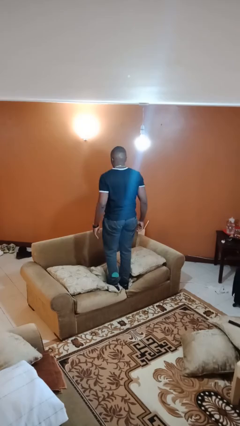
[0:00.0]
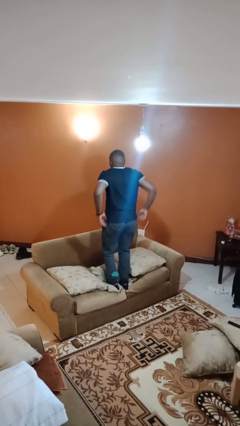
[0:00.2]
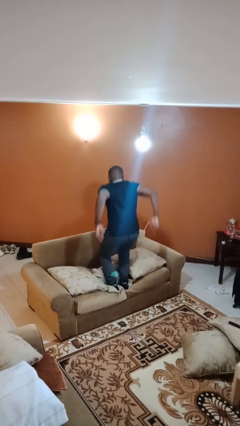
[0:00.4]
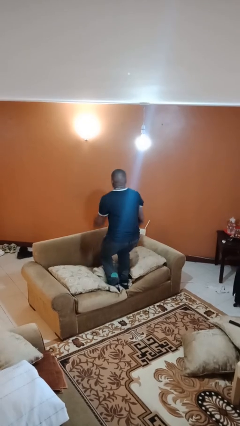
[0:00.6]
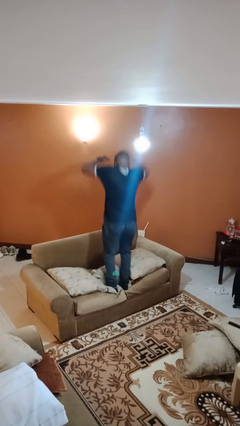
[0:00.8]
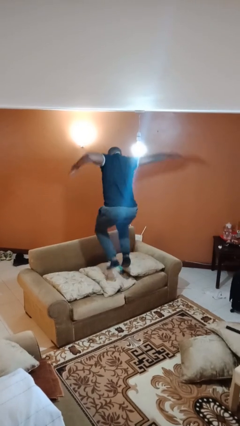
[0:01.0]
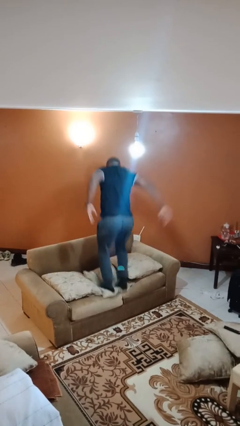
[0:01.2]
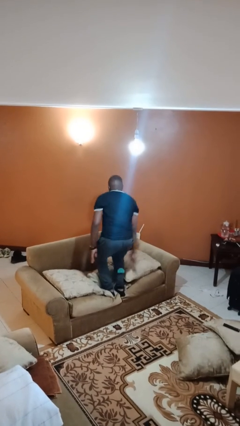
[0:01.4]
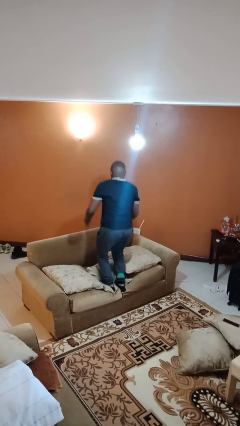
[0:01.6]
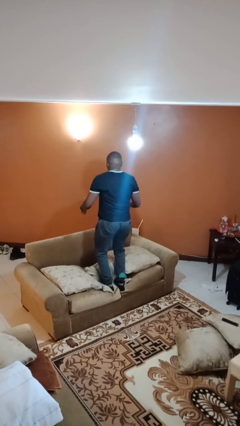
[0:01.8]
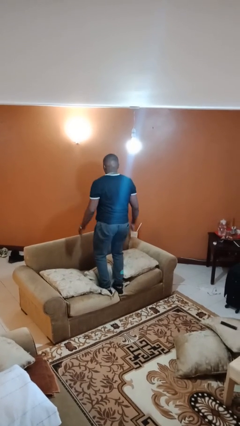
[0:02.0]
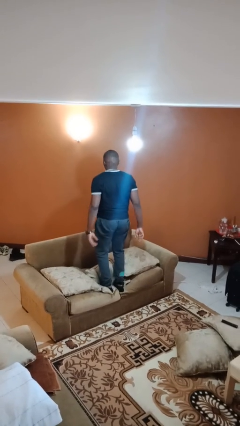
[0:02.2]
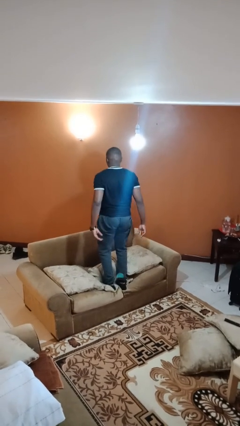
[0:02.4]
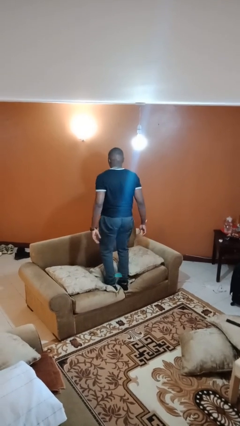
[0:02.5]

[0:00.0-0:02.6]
person jumps on couch

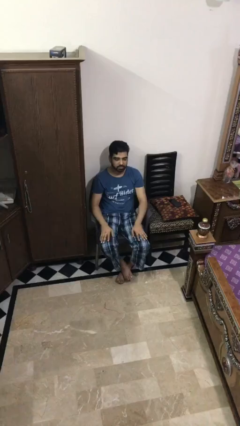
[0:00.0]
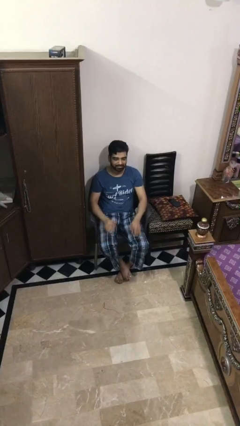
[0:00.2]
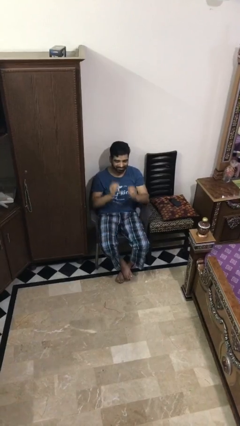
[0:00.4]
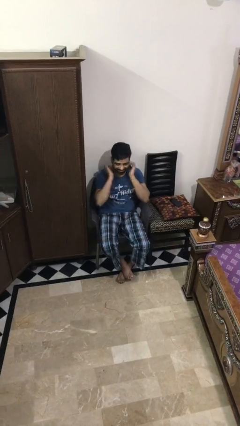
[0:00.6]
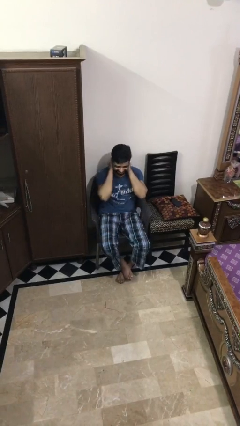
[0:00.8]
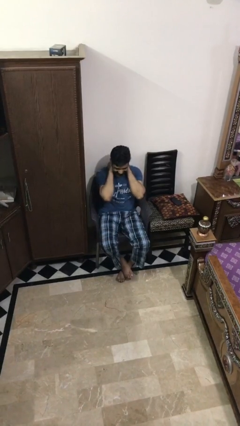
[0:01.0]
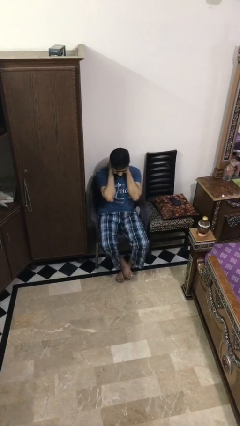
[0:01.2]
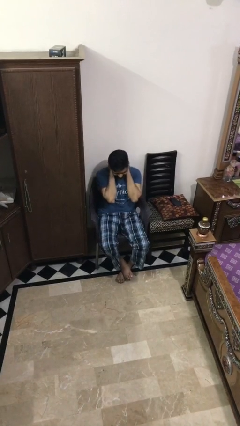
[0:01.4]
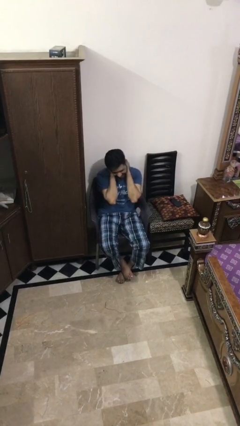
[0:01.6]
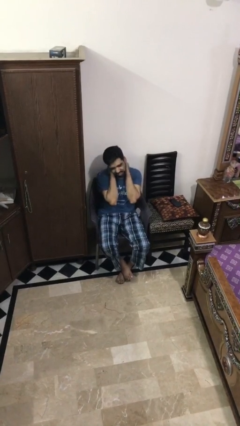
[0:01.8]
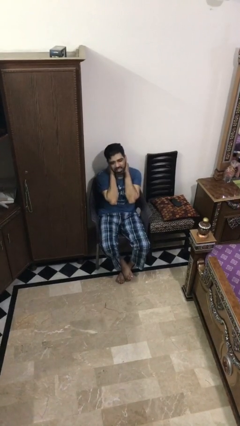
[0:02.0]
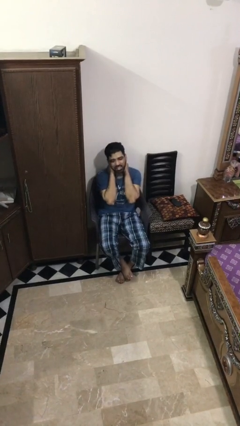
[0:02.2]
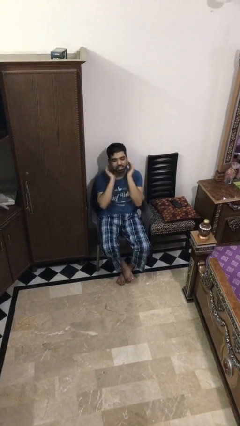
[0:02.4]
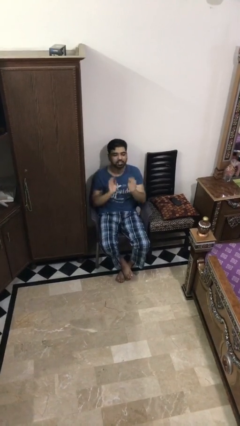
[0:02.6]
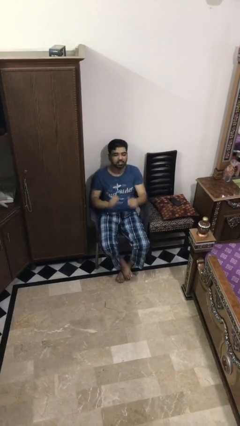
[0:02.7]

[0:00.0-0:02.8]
person rubs neck

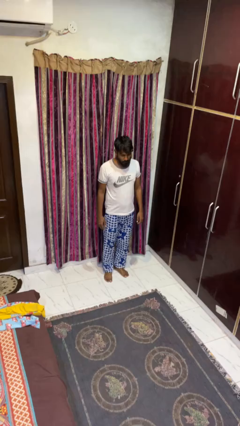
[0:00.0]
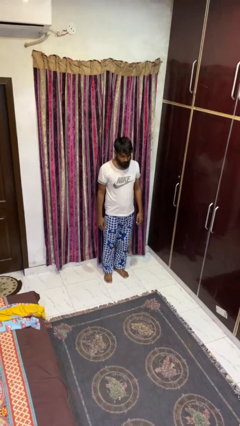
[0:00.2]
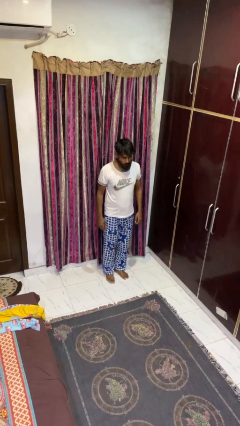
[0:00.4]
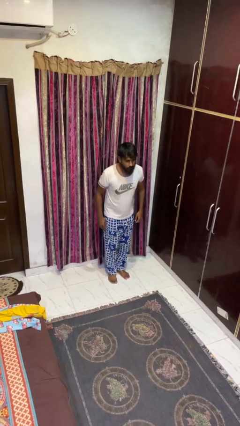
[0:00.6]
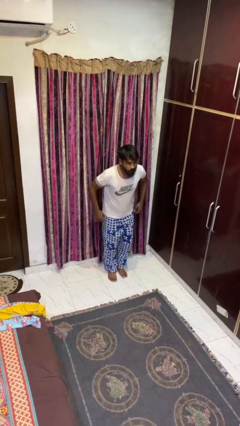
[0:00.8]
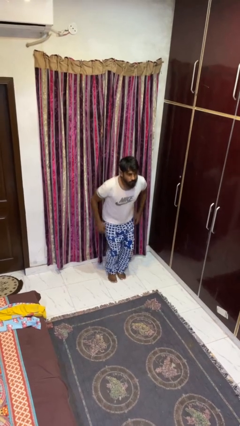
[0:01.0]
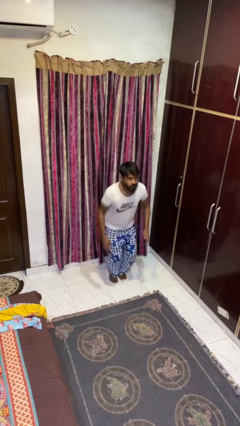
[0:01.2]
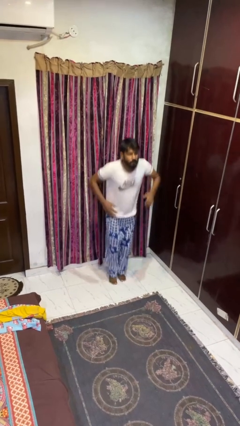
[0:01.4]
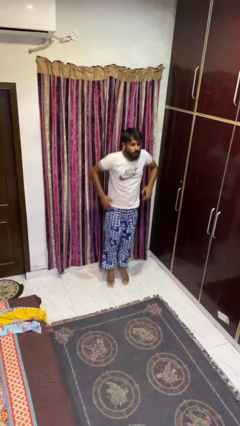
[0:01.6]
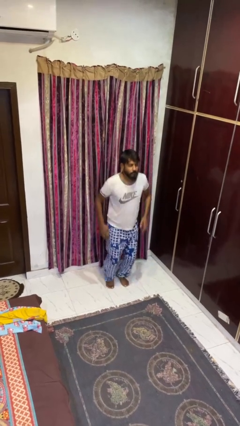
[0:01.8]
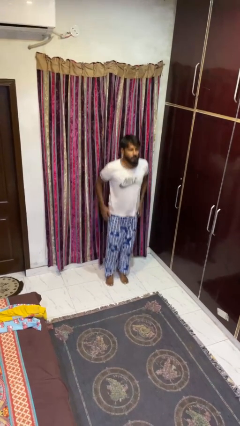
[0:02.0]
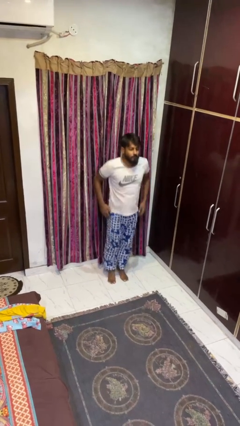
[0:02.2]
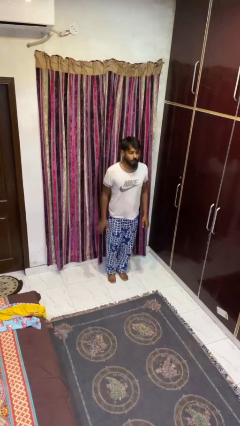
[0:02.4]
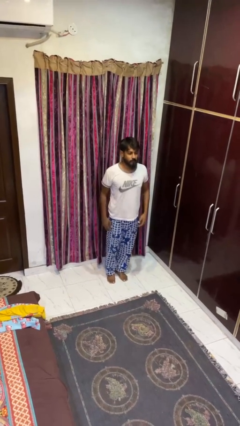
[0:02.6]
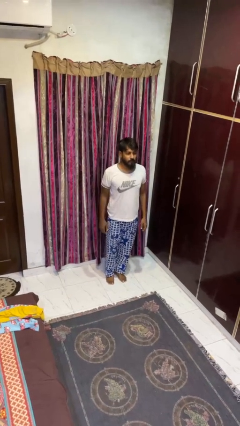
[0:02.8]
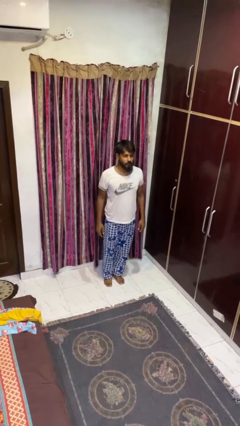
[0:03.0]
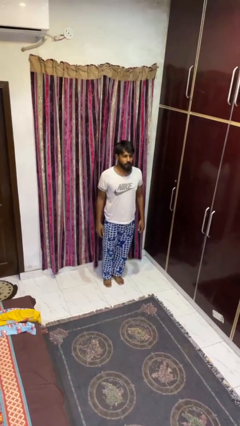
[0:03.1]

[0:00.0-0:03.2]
person jumps

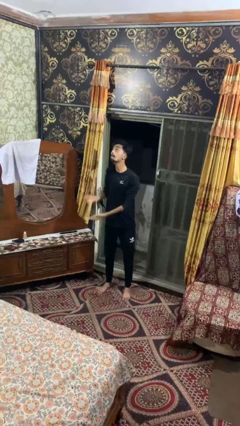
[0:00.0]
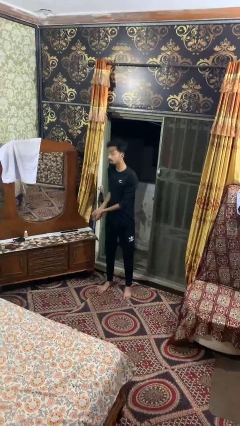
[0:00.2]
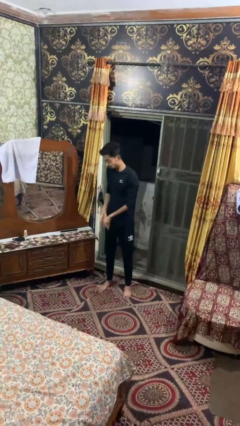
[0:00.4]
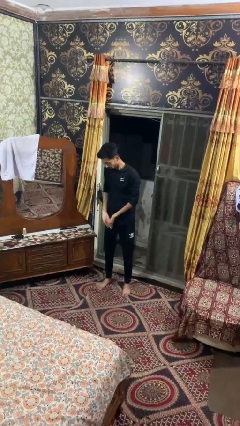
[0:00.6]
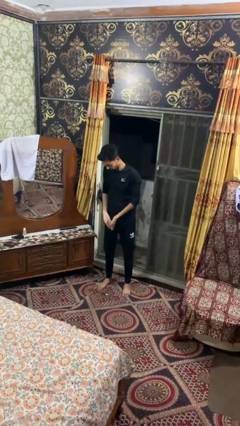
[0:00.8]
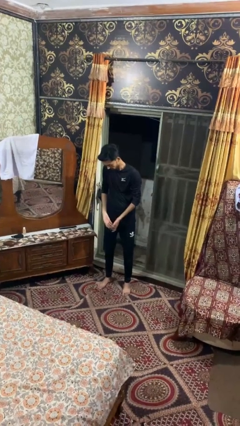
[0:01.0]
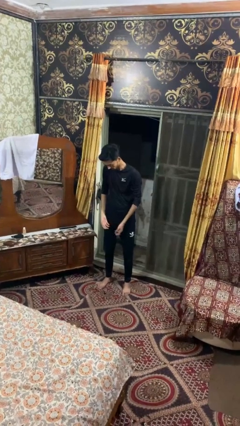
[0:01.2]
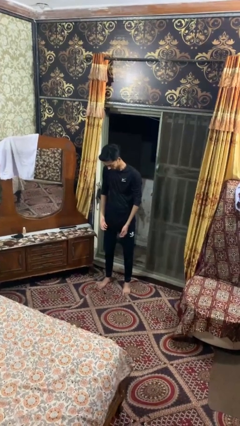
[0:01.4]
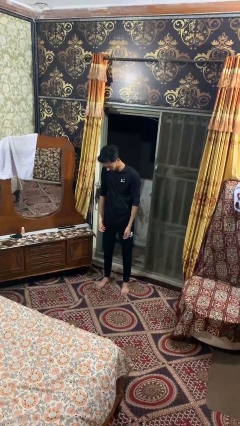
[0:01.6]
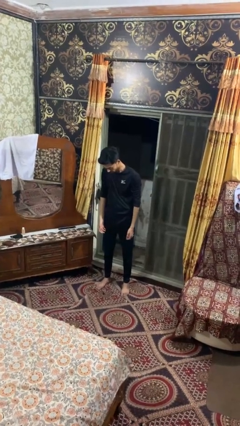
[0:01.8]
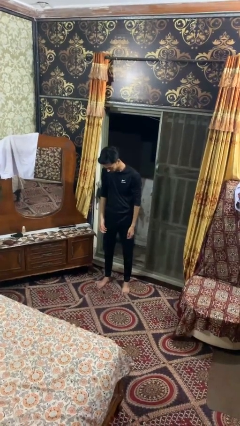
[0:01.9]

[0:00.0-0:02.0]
person catches dropped object

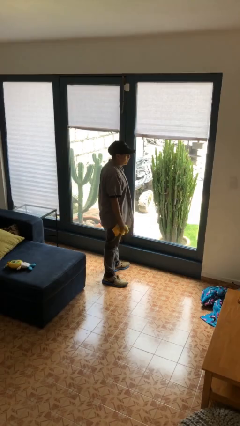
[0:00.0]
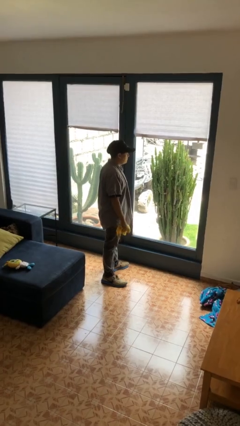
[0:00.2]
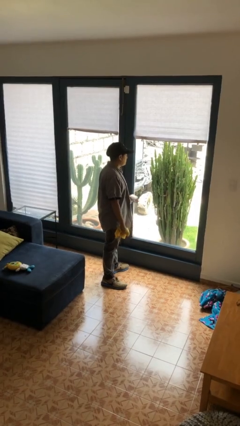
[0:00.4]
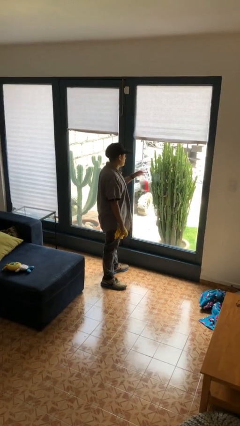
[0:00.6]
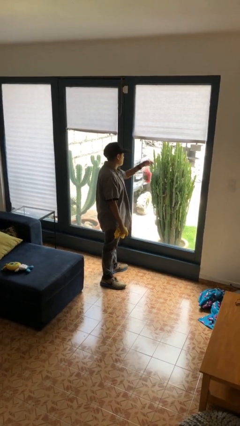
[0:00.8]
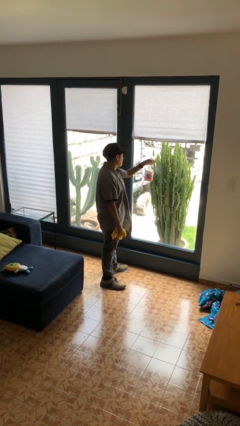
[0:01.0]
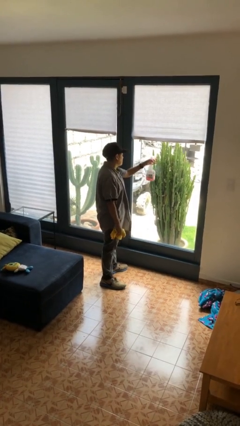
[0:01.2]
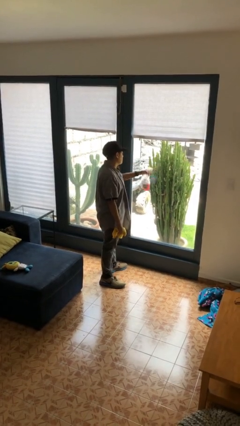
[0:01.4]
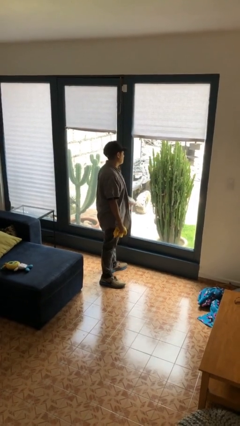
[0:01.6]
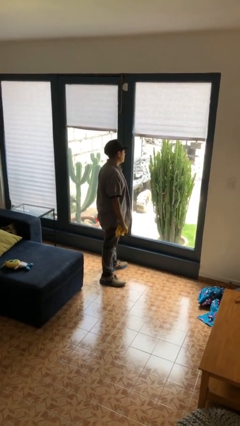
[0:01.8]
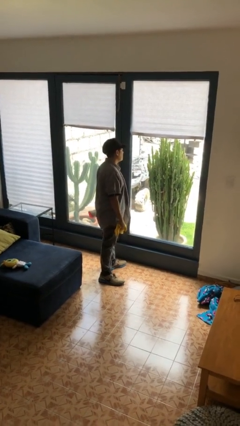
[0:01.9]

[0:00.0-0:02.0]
person sprays from bottle

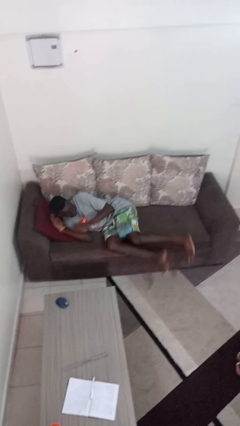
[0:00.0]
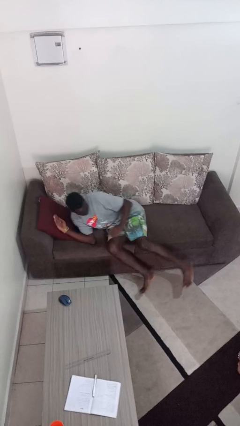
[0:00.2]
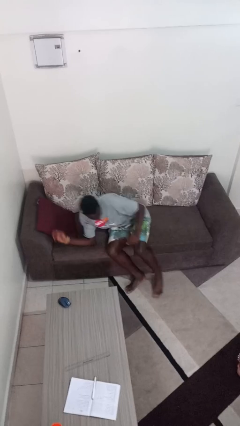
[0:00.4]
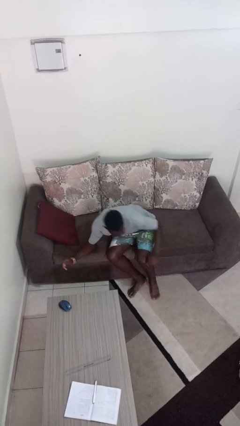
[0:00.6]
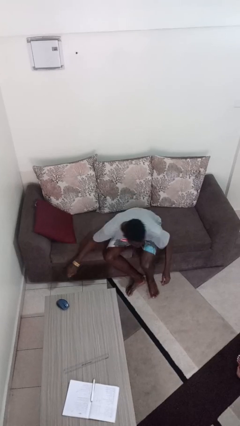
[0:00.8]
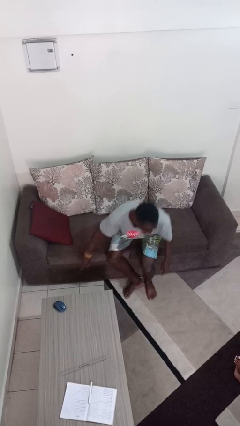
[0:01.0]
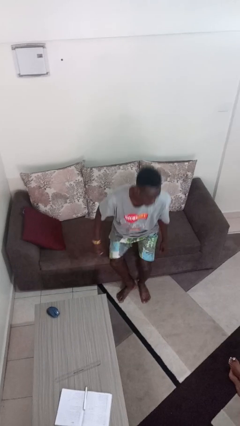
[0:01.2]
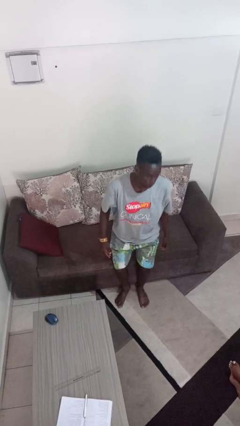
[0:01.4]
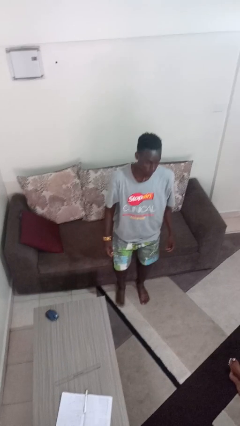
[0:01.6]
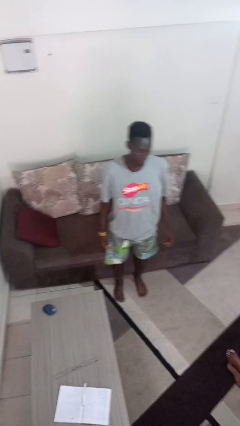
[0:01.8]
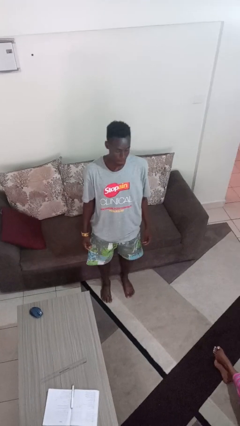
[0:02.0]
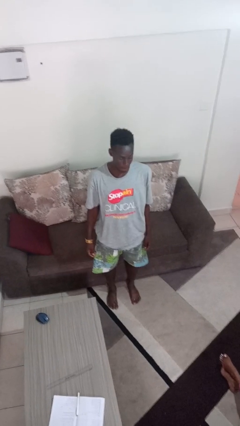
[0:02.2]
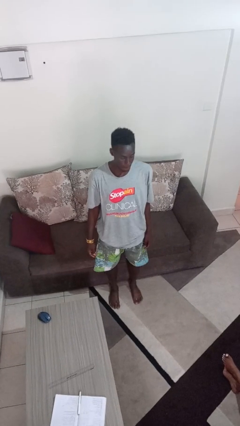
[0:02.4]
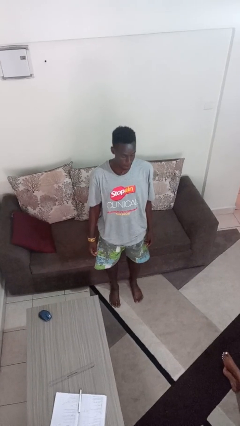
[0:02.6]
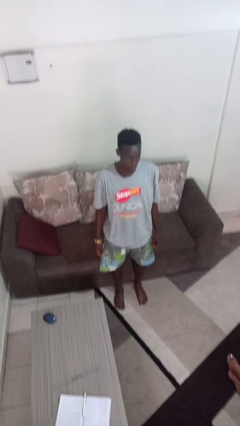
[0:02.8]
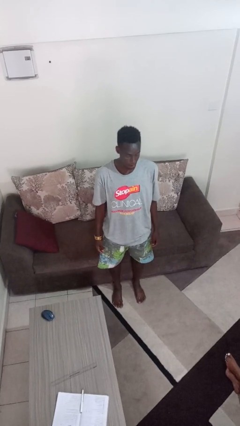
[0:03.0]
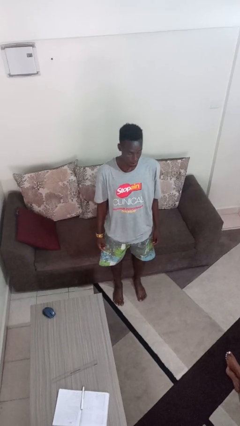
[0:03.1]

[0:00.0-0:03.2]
person stands up

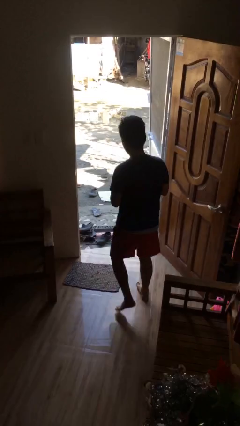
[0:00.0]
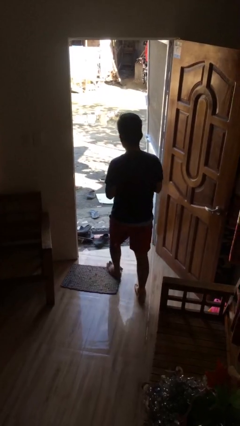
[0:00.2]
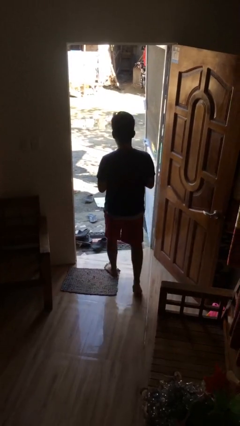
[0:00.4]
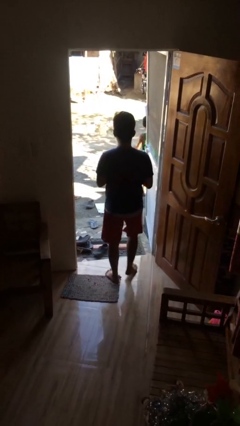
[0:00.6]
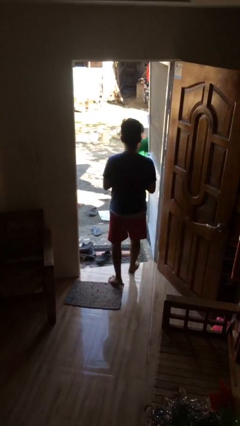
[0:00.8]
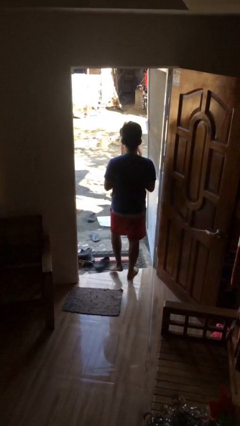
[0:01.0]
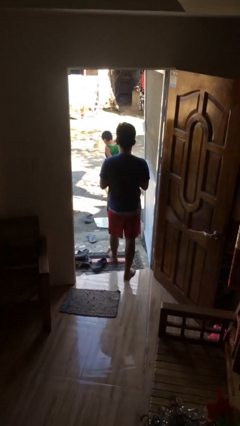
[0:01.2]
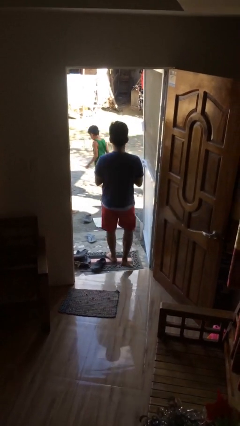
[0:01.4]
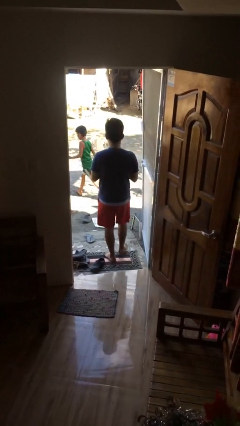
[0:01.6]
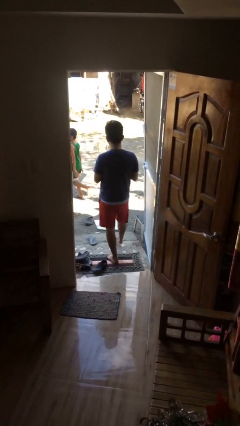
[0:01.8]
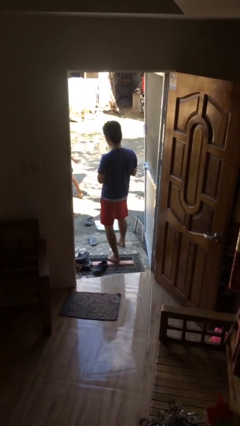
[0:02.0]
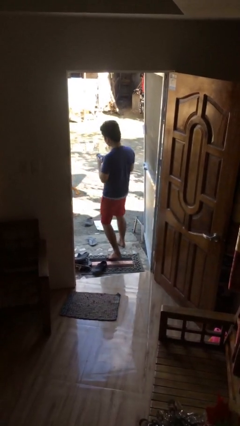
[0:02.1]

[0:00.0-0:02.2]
person exits scene through structure
